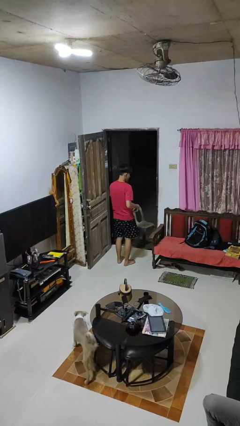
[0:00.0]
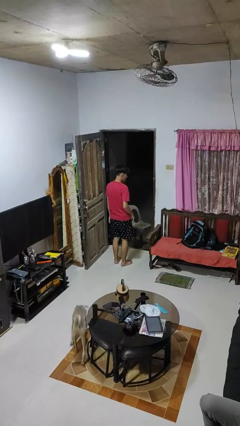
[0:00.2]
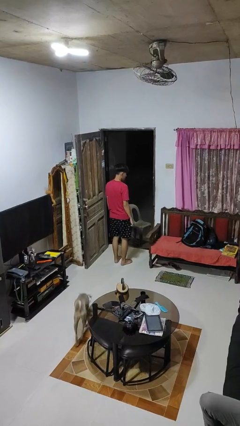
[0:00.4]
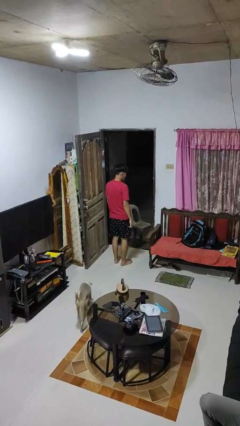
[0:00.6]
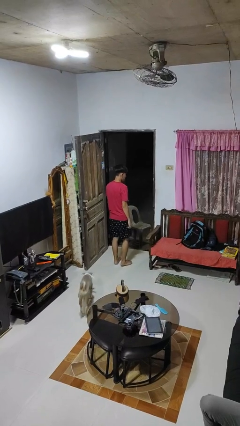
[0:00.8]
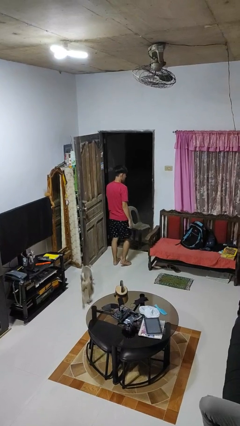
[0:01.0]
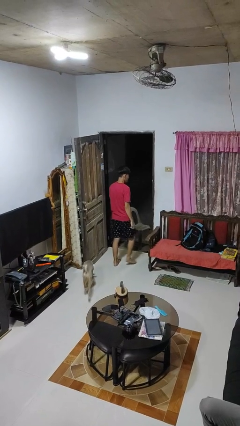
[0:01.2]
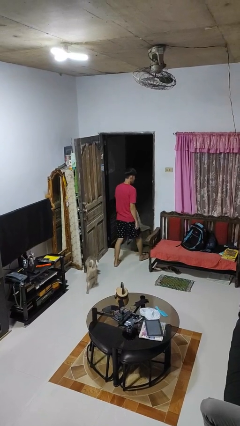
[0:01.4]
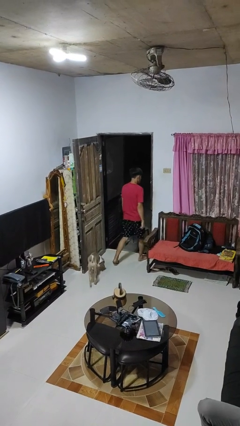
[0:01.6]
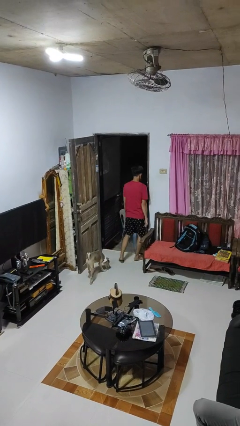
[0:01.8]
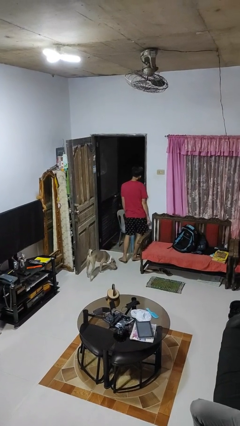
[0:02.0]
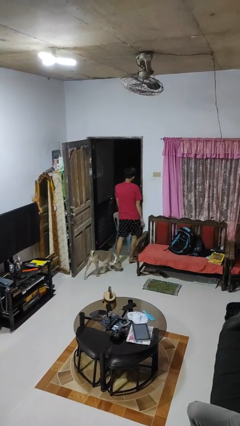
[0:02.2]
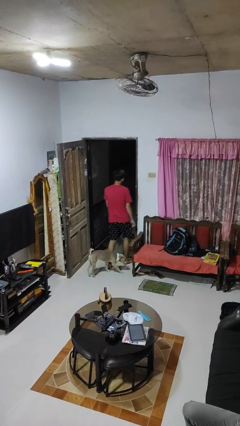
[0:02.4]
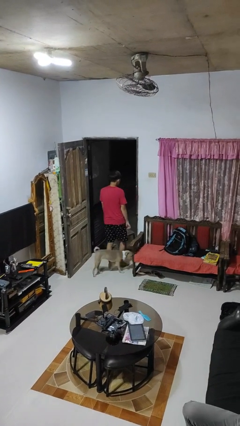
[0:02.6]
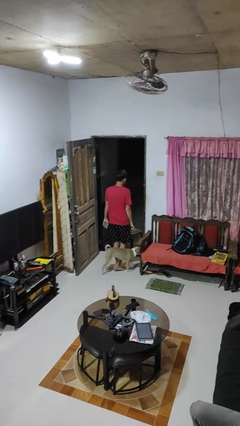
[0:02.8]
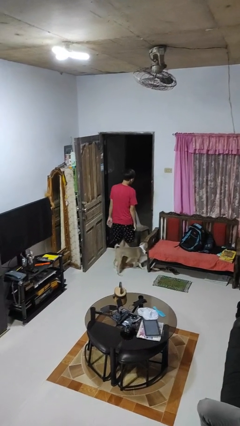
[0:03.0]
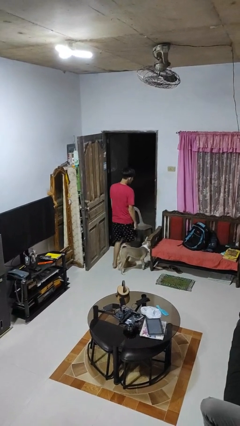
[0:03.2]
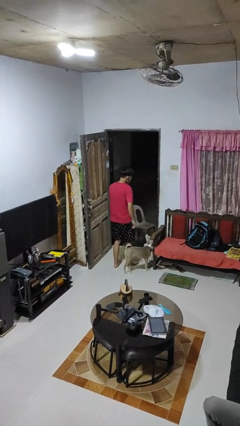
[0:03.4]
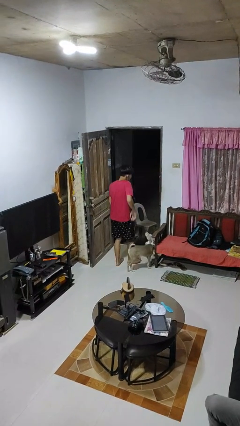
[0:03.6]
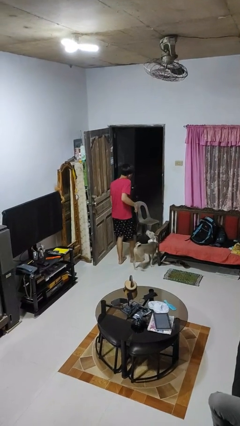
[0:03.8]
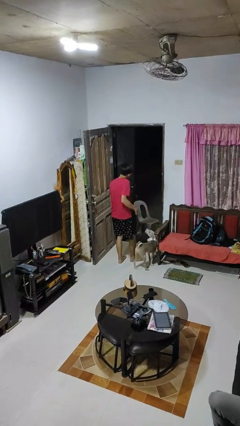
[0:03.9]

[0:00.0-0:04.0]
person bumps into wall

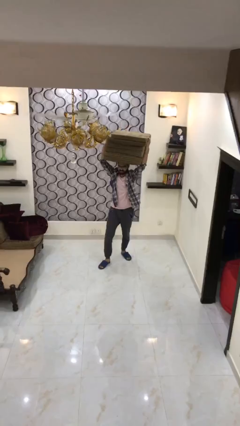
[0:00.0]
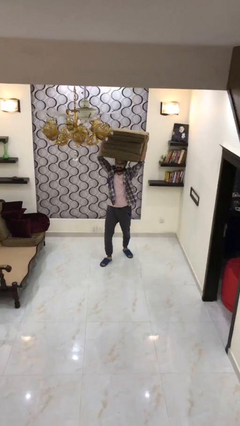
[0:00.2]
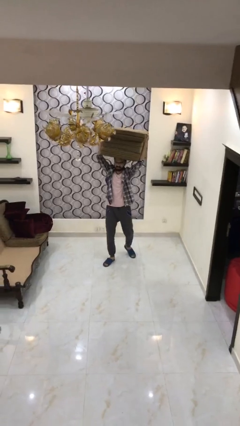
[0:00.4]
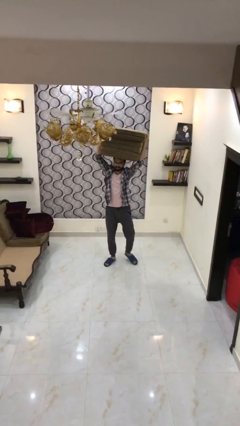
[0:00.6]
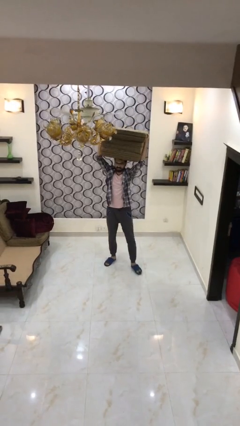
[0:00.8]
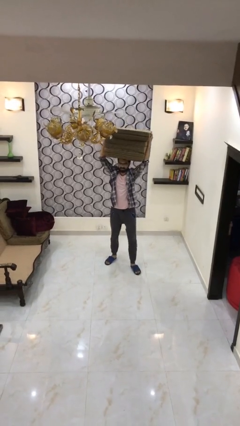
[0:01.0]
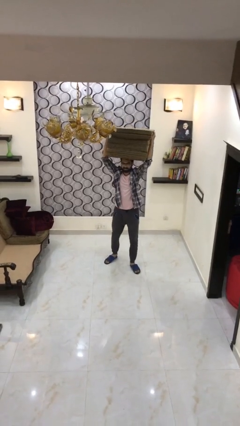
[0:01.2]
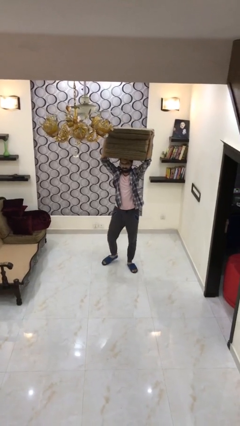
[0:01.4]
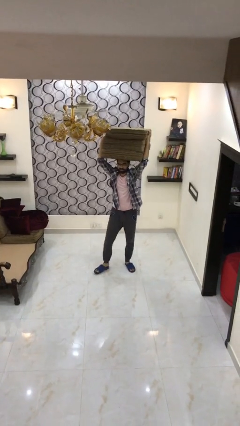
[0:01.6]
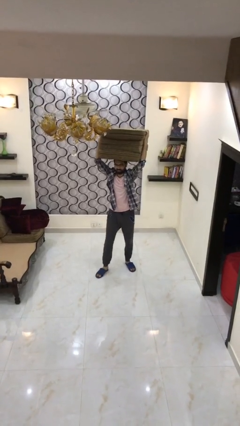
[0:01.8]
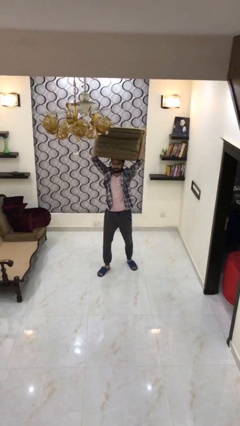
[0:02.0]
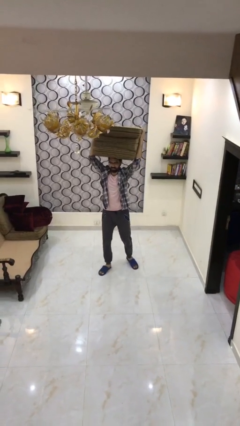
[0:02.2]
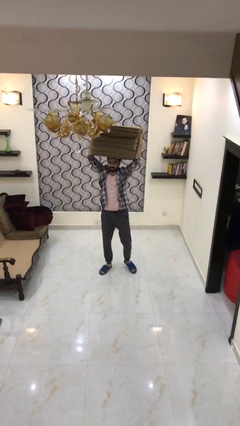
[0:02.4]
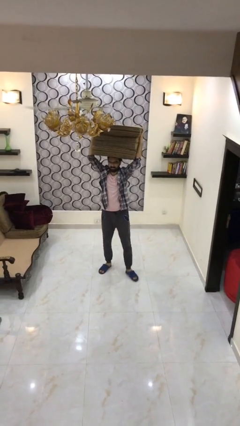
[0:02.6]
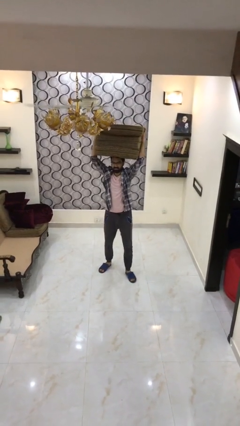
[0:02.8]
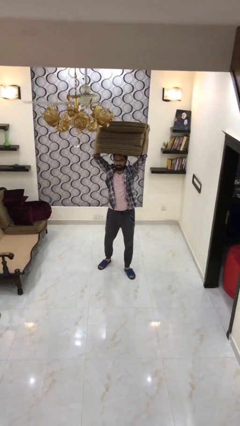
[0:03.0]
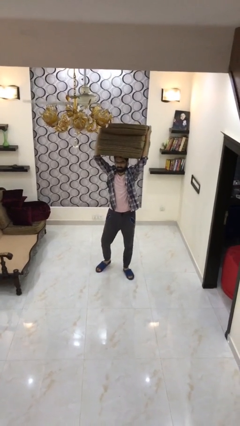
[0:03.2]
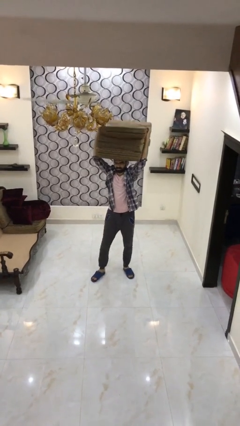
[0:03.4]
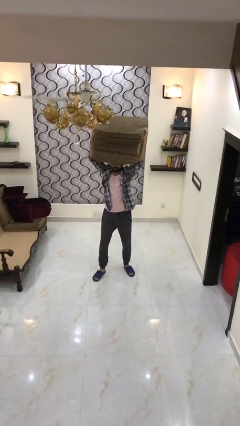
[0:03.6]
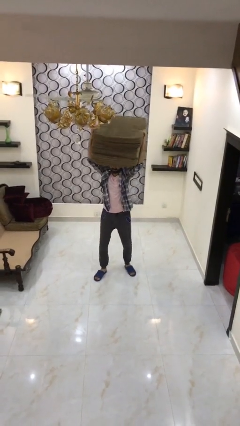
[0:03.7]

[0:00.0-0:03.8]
person carries heavy object

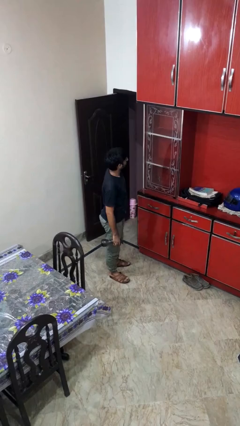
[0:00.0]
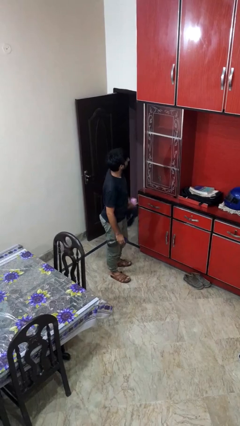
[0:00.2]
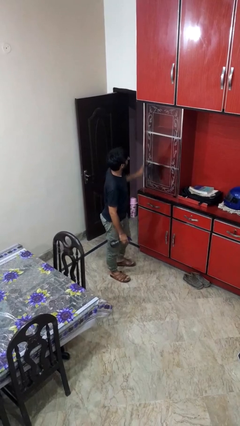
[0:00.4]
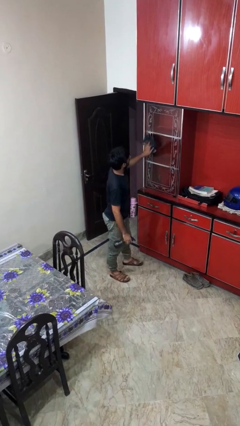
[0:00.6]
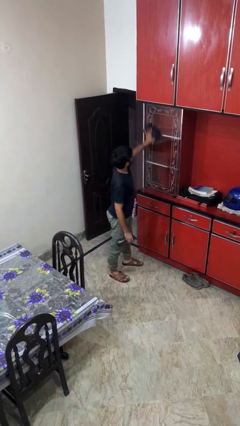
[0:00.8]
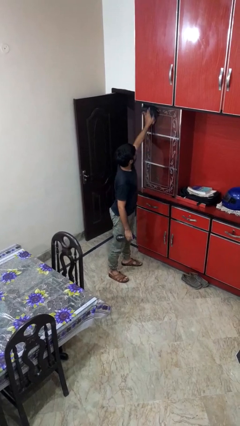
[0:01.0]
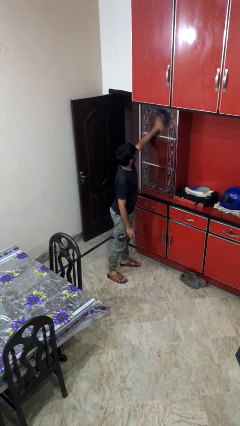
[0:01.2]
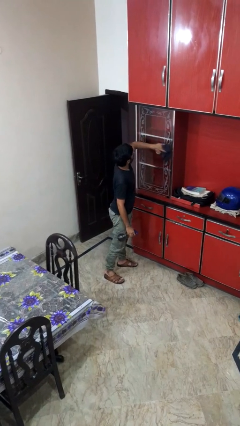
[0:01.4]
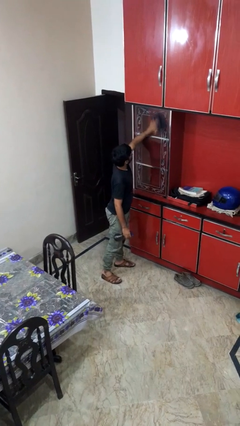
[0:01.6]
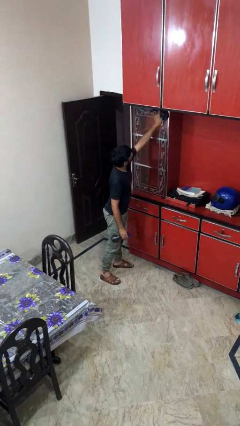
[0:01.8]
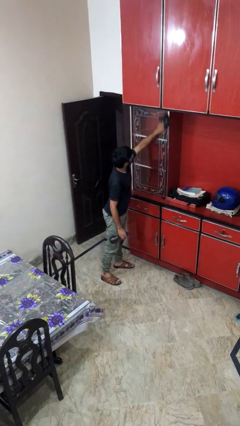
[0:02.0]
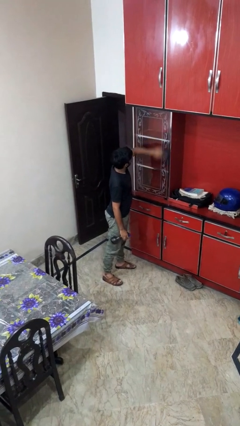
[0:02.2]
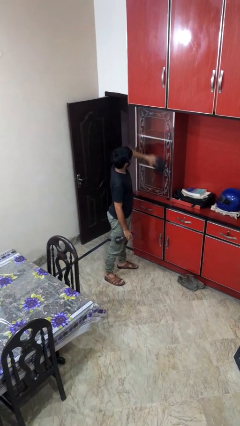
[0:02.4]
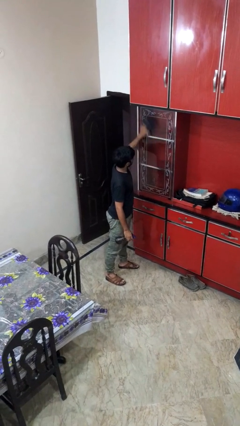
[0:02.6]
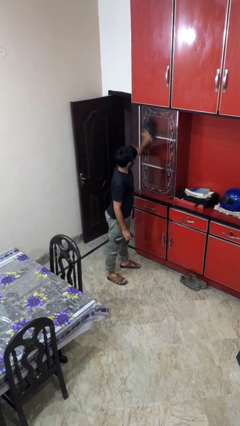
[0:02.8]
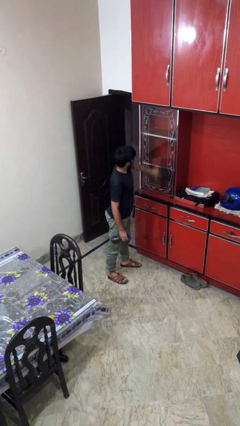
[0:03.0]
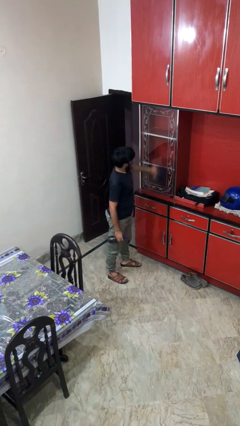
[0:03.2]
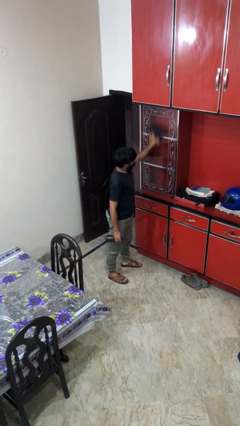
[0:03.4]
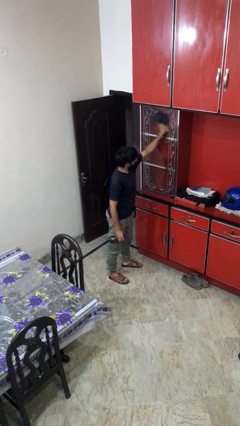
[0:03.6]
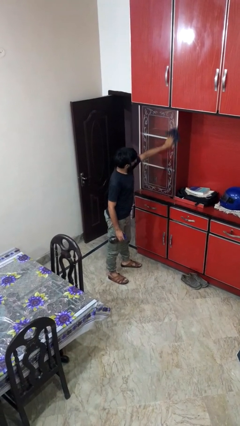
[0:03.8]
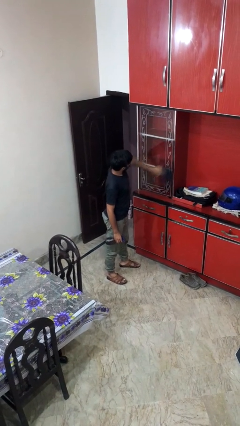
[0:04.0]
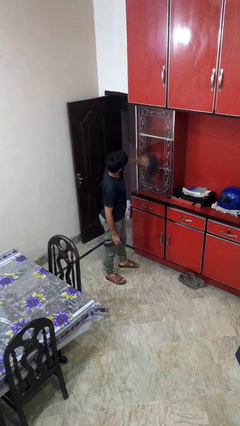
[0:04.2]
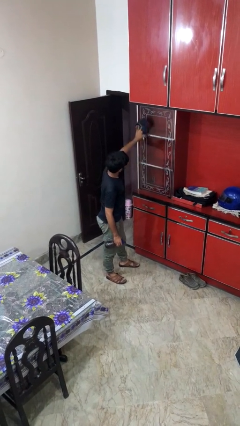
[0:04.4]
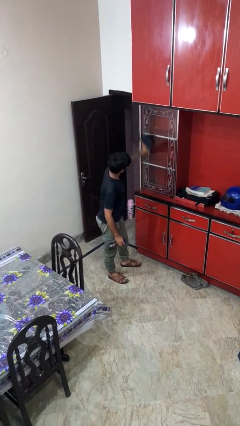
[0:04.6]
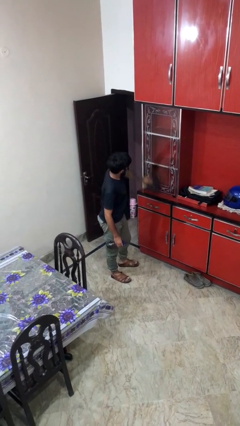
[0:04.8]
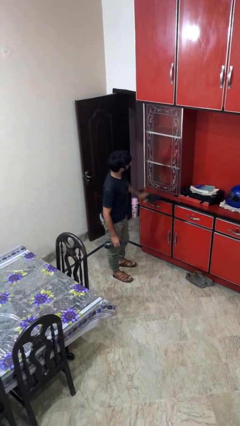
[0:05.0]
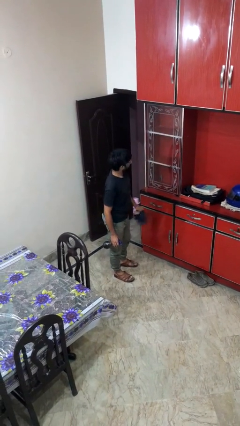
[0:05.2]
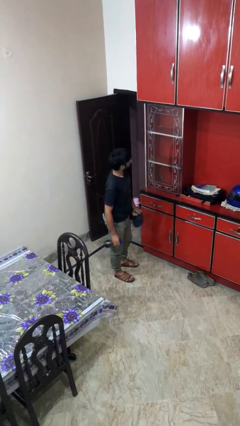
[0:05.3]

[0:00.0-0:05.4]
person washes window

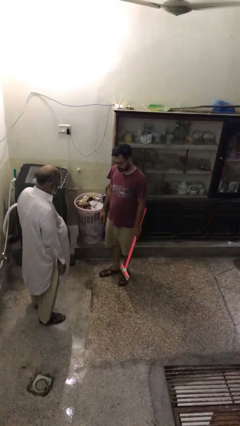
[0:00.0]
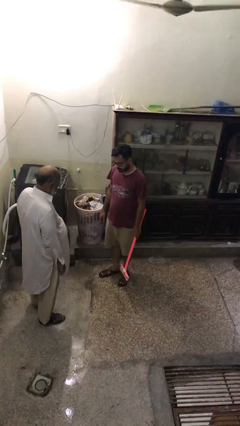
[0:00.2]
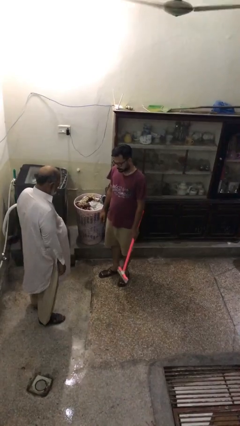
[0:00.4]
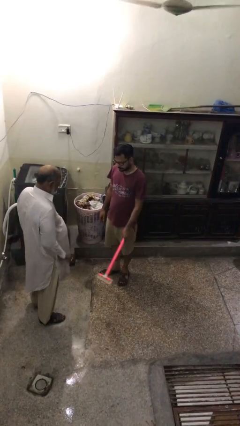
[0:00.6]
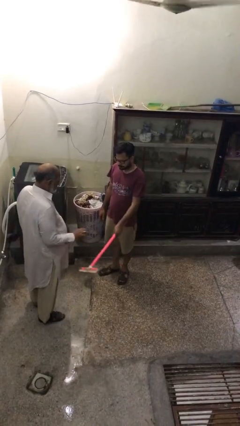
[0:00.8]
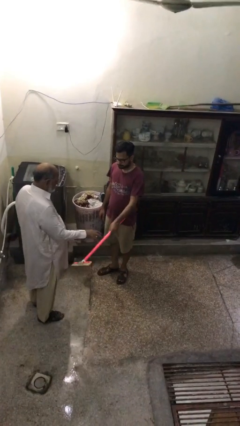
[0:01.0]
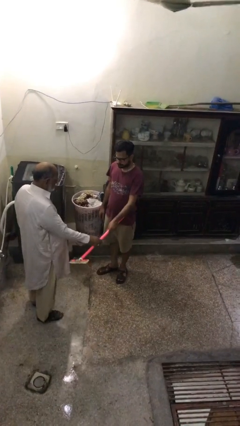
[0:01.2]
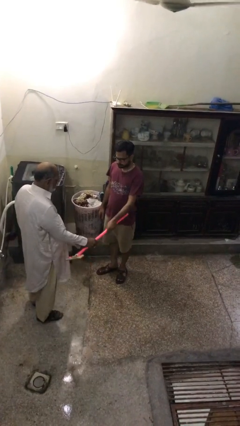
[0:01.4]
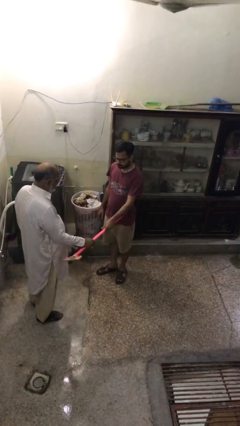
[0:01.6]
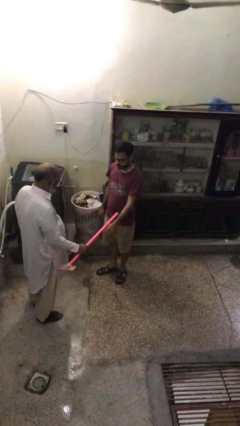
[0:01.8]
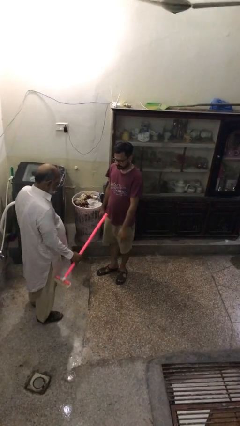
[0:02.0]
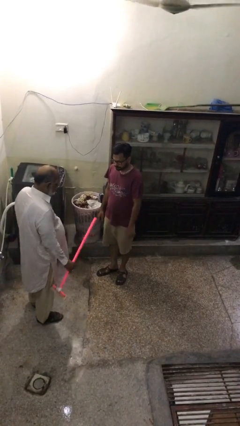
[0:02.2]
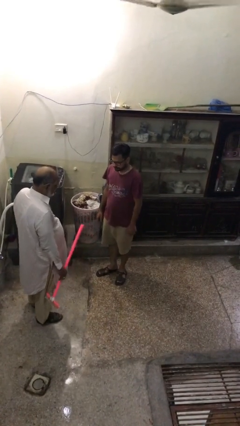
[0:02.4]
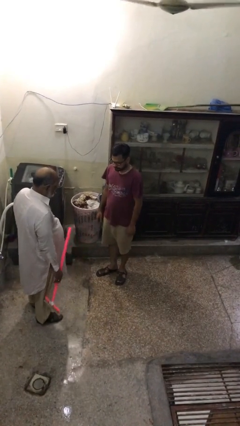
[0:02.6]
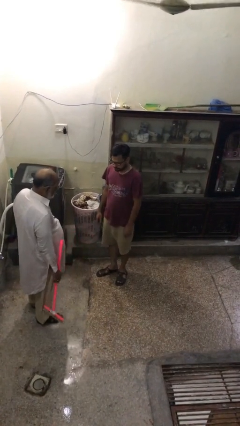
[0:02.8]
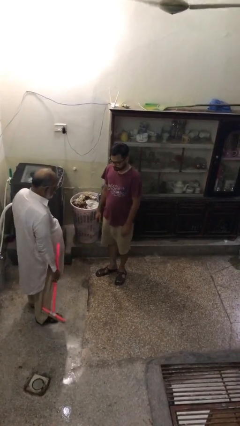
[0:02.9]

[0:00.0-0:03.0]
person transfers object to person

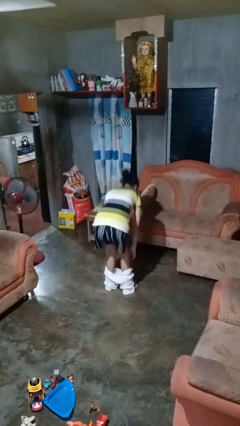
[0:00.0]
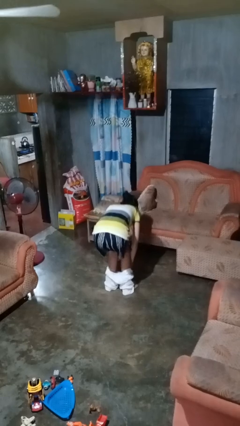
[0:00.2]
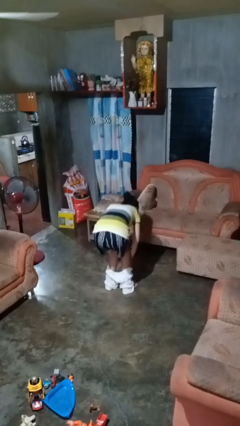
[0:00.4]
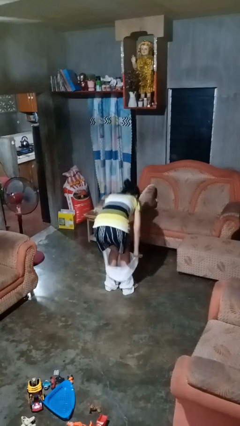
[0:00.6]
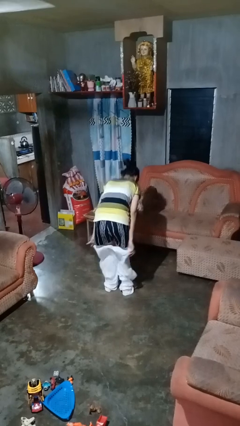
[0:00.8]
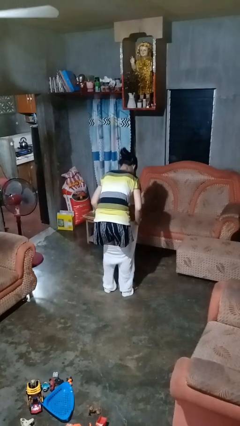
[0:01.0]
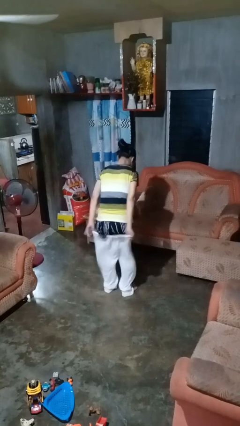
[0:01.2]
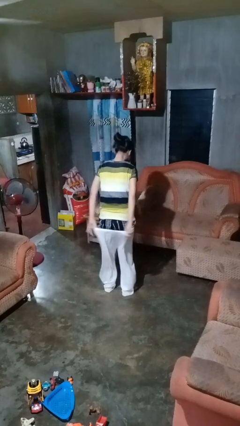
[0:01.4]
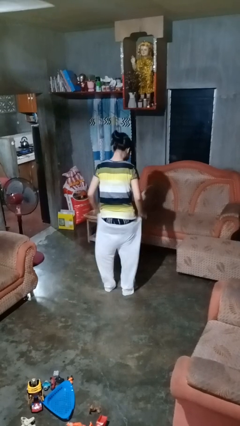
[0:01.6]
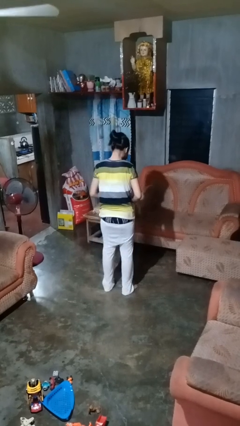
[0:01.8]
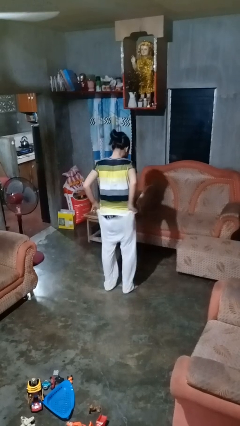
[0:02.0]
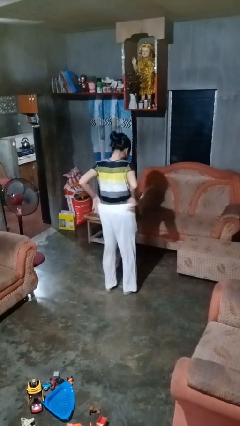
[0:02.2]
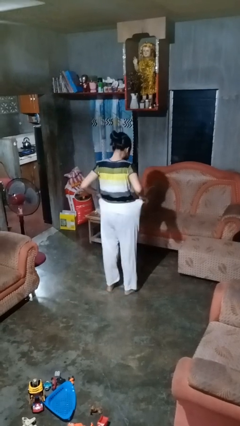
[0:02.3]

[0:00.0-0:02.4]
person puts on pants
